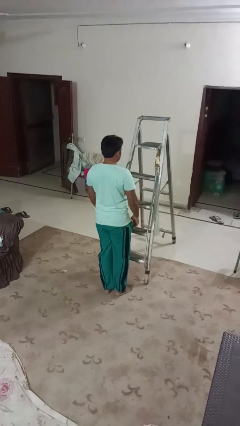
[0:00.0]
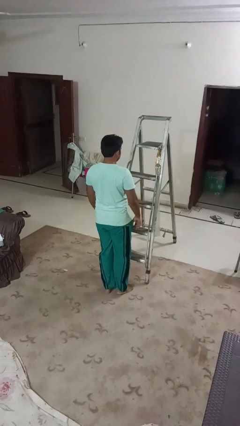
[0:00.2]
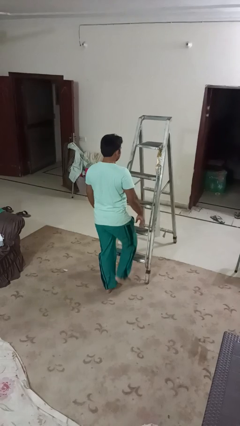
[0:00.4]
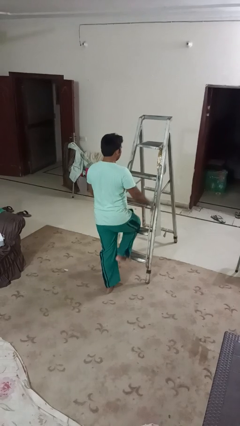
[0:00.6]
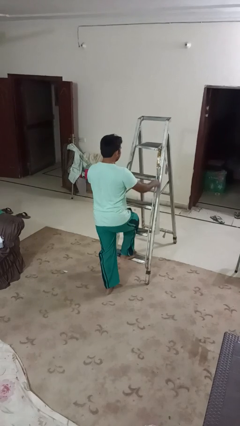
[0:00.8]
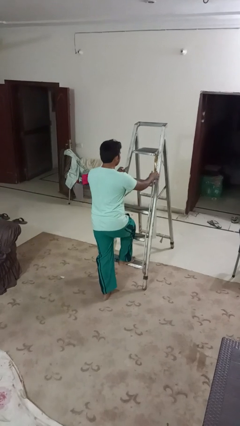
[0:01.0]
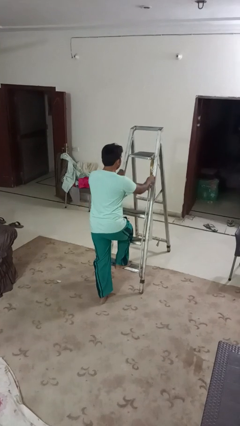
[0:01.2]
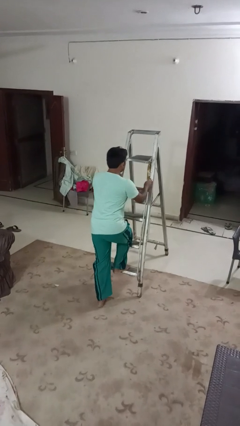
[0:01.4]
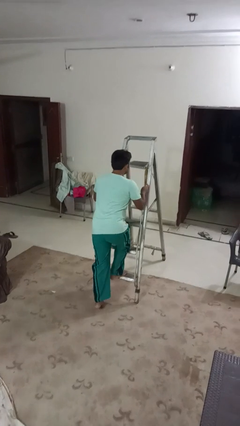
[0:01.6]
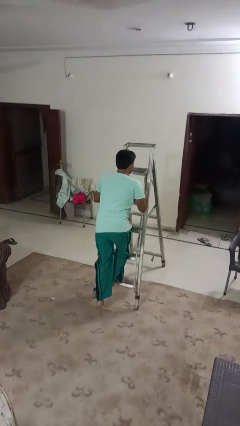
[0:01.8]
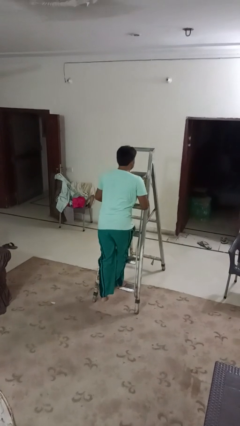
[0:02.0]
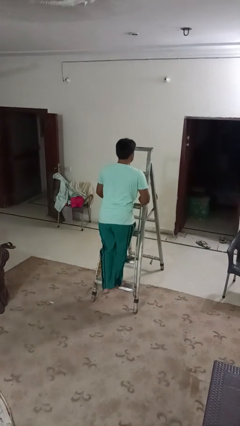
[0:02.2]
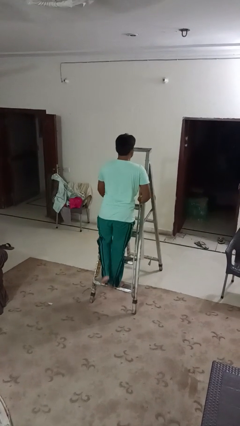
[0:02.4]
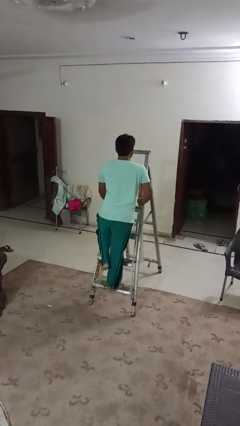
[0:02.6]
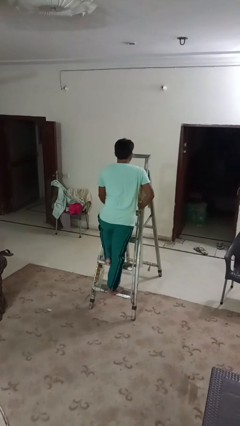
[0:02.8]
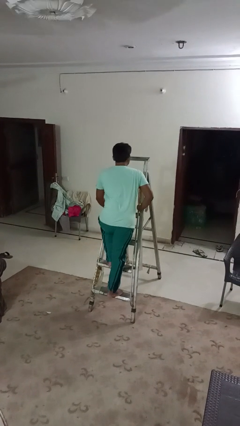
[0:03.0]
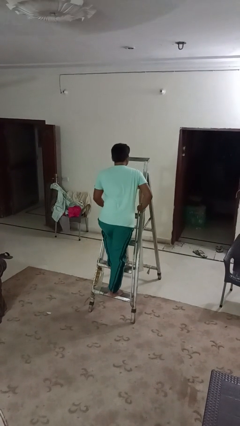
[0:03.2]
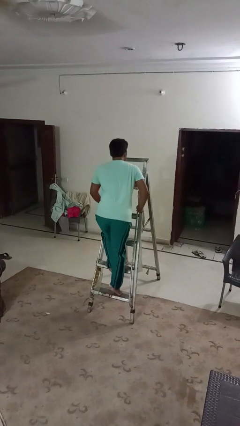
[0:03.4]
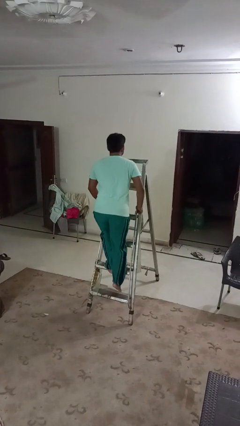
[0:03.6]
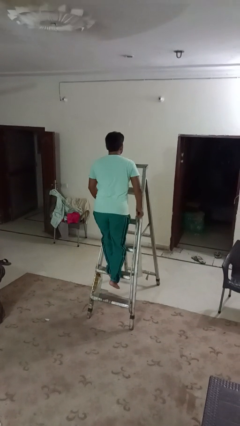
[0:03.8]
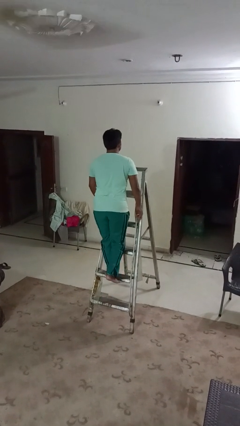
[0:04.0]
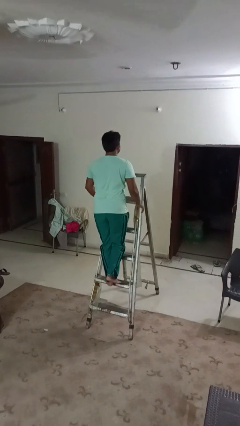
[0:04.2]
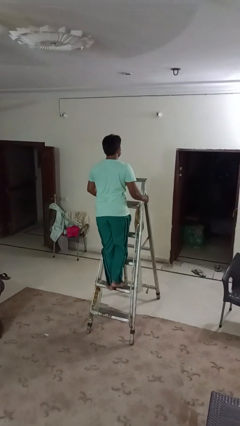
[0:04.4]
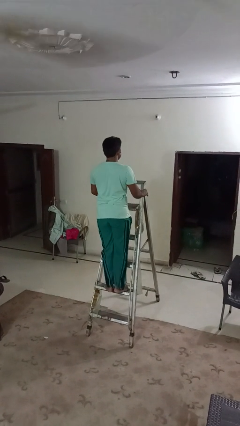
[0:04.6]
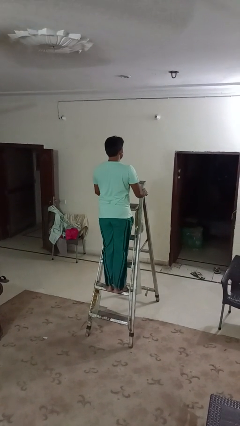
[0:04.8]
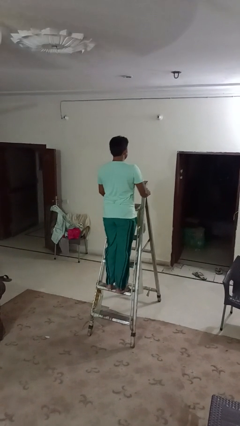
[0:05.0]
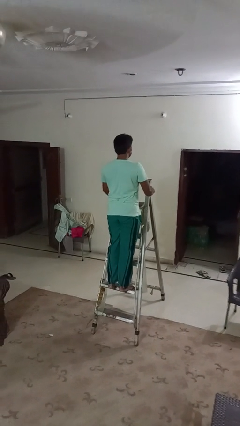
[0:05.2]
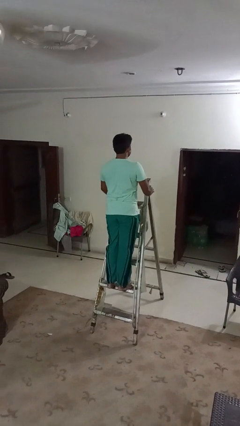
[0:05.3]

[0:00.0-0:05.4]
person climbs up ladder

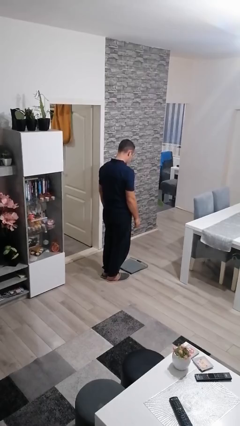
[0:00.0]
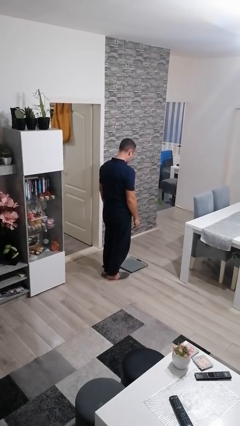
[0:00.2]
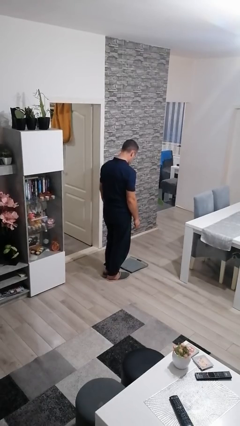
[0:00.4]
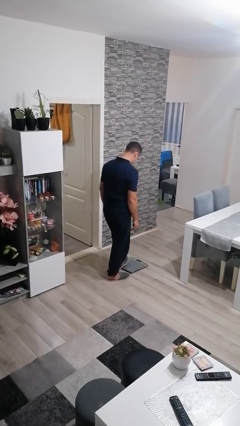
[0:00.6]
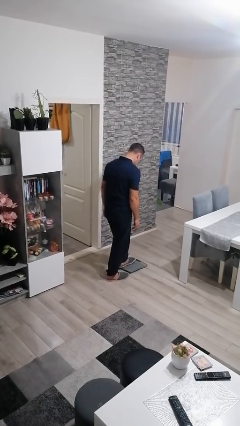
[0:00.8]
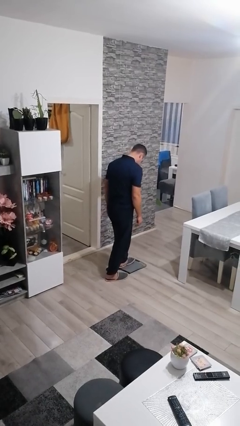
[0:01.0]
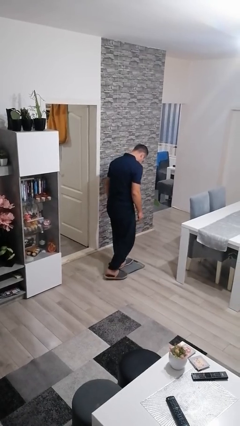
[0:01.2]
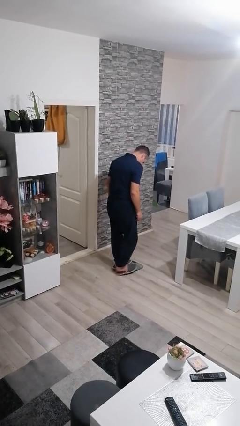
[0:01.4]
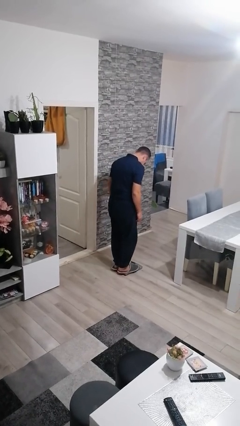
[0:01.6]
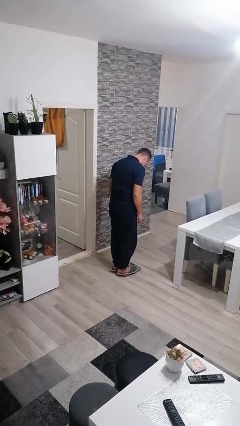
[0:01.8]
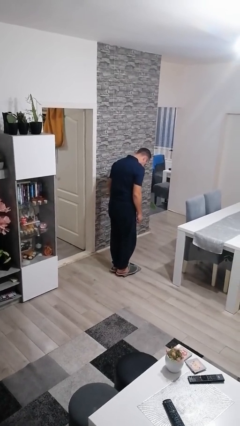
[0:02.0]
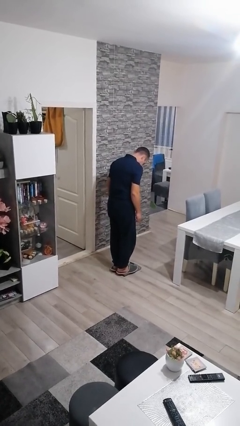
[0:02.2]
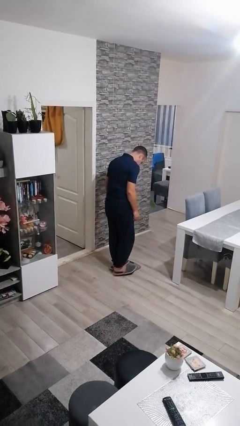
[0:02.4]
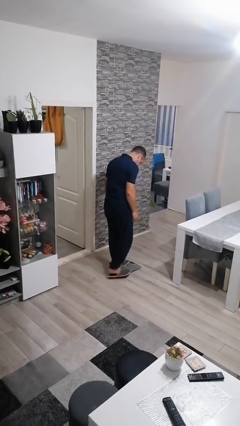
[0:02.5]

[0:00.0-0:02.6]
person uses bodyweight scale

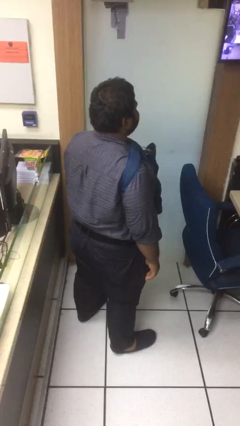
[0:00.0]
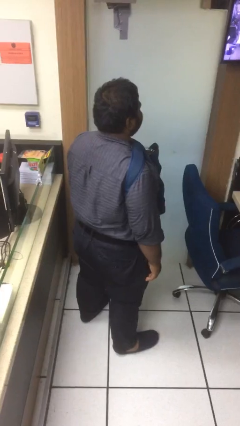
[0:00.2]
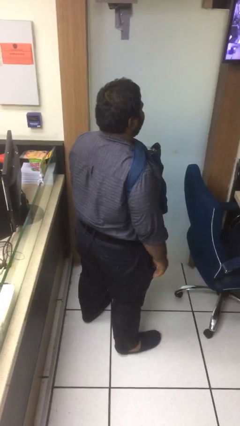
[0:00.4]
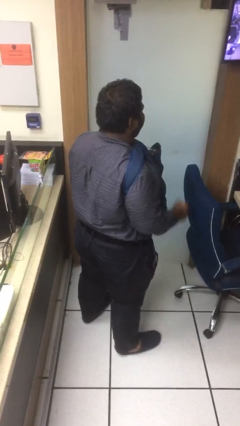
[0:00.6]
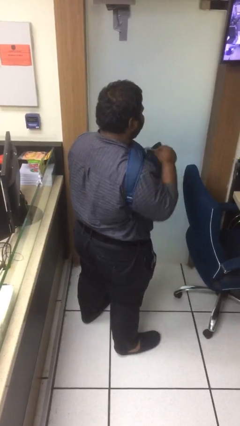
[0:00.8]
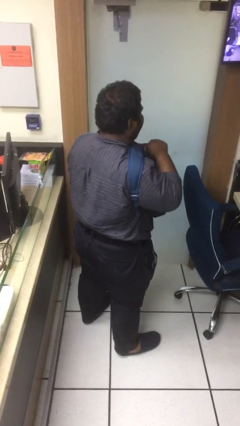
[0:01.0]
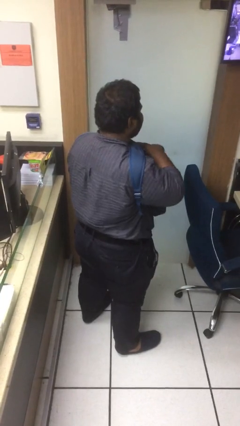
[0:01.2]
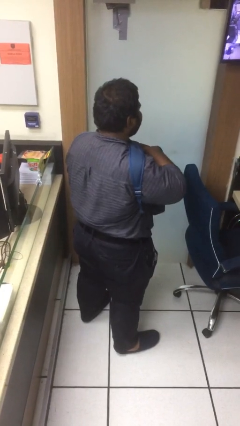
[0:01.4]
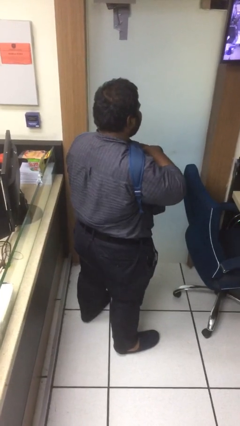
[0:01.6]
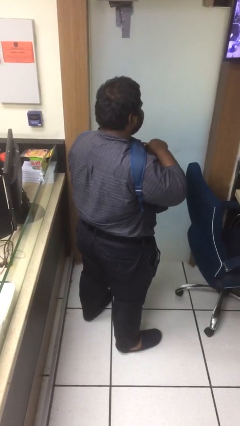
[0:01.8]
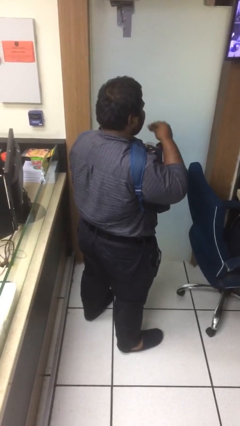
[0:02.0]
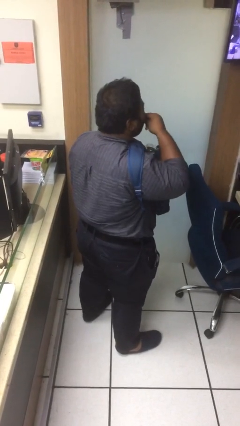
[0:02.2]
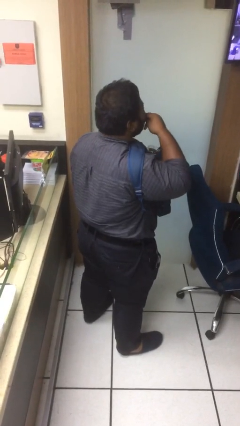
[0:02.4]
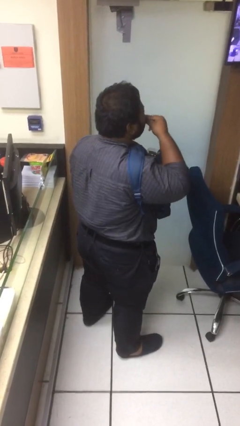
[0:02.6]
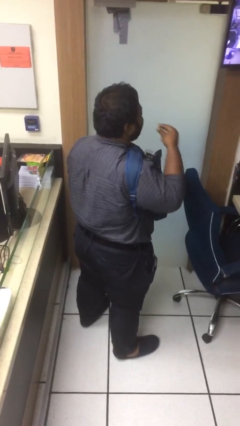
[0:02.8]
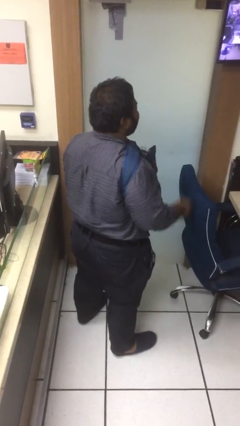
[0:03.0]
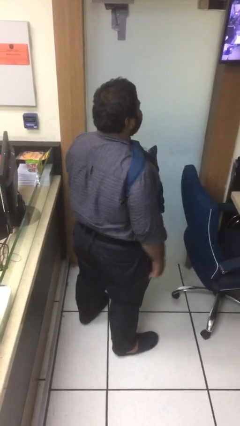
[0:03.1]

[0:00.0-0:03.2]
person eats snack from bag

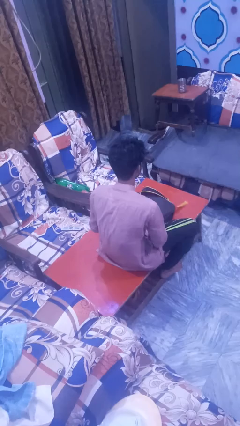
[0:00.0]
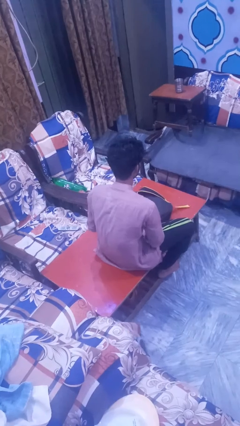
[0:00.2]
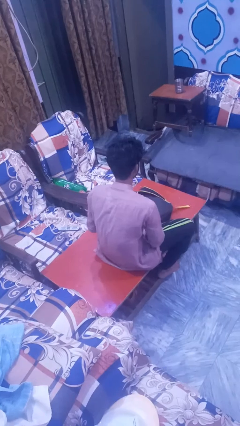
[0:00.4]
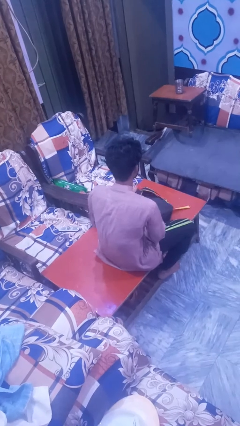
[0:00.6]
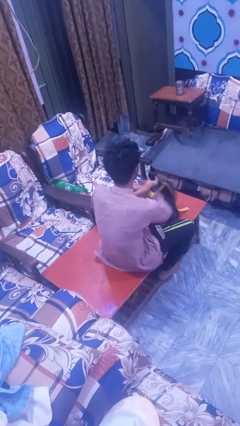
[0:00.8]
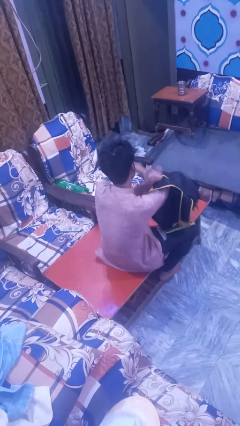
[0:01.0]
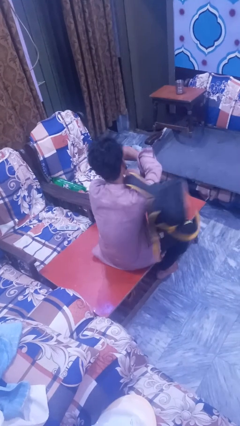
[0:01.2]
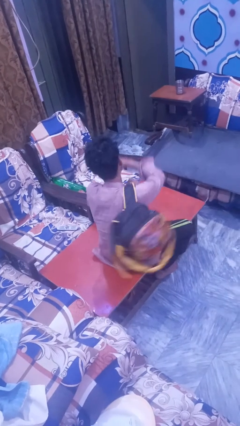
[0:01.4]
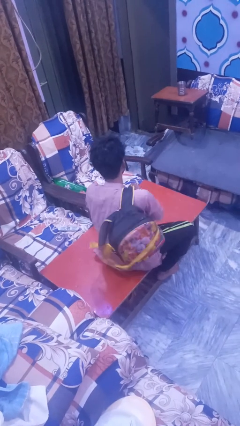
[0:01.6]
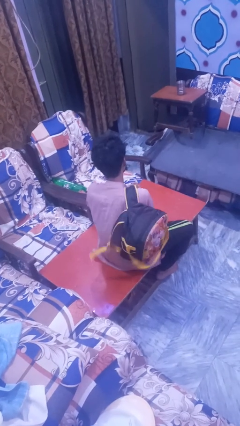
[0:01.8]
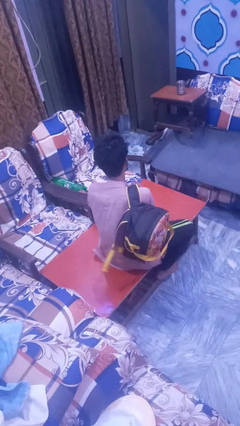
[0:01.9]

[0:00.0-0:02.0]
person puts on backpack

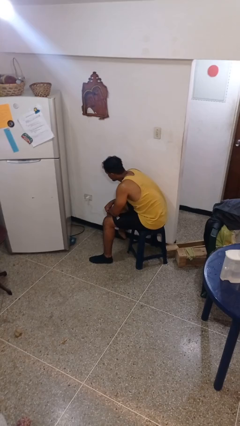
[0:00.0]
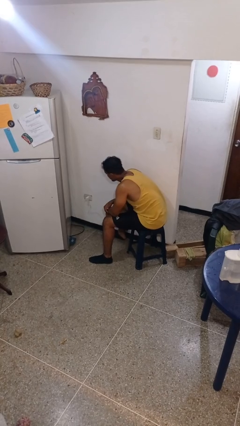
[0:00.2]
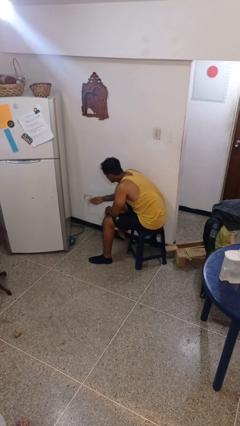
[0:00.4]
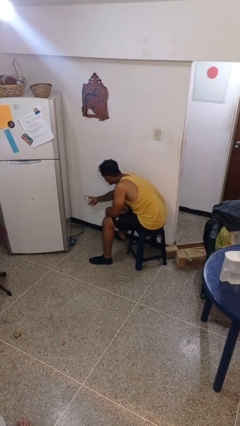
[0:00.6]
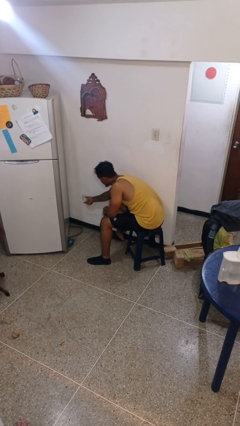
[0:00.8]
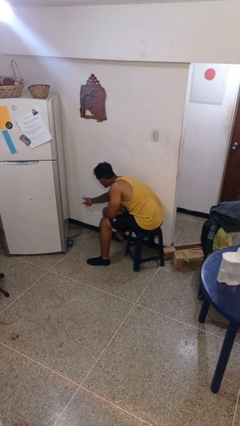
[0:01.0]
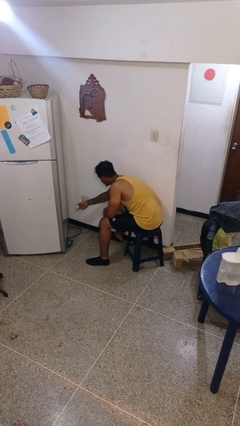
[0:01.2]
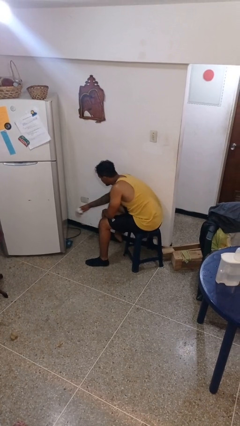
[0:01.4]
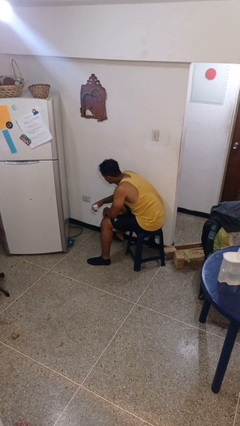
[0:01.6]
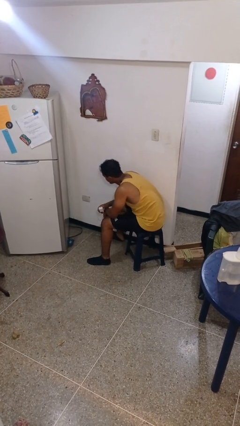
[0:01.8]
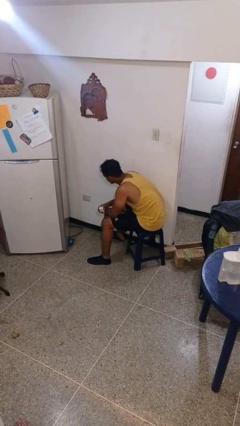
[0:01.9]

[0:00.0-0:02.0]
person unplugs from electrical socket

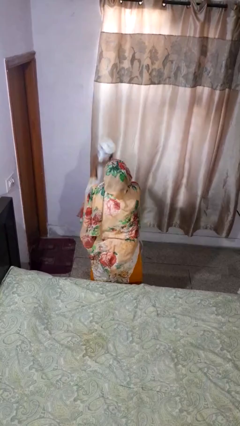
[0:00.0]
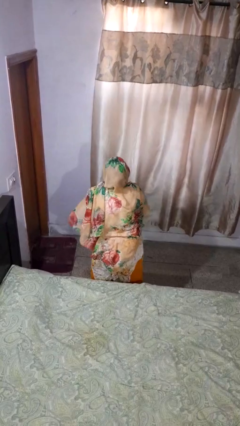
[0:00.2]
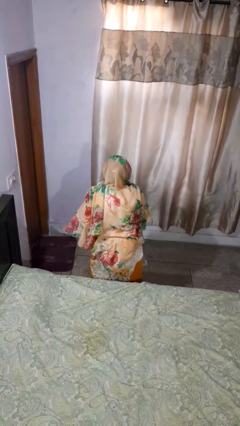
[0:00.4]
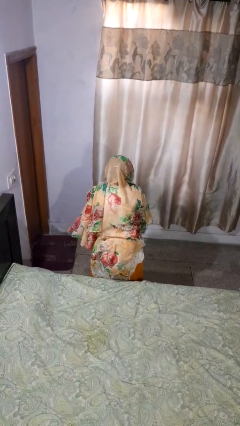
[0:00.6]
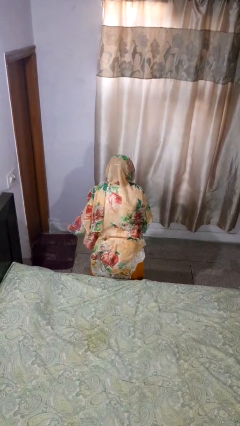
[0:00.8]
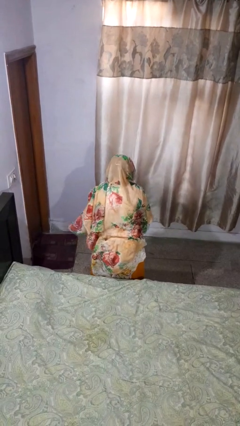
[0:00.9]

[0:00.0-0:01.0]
person catches dropped object

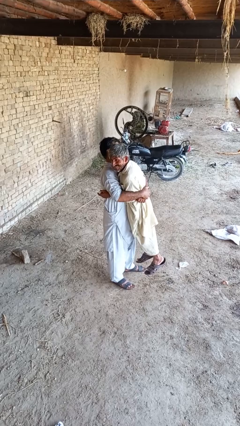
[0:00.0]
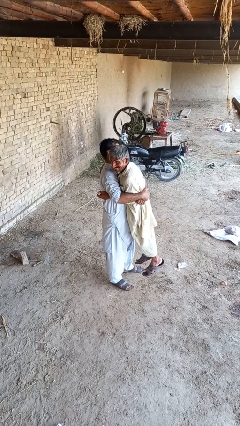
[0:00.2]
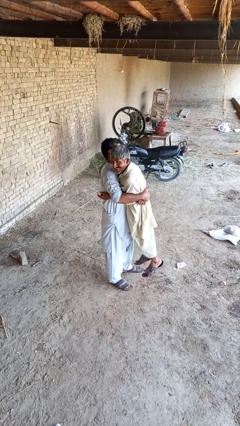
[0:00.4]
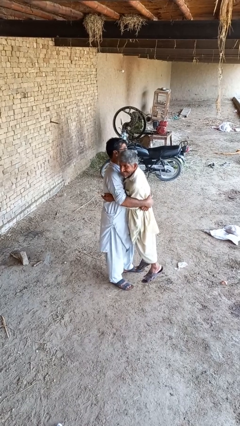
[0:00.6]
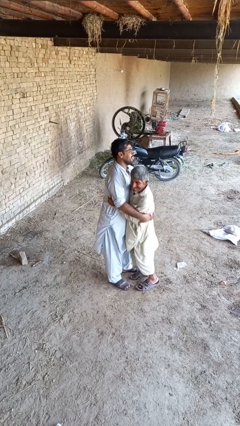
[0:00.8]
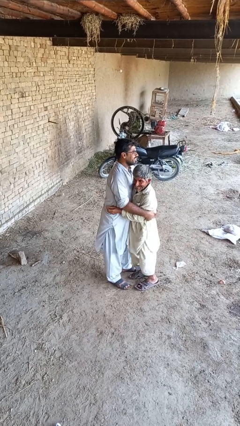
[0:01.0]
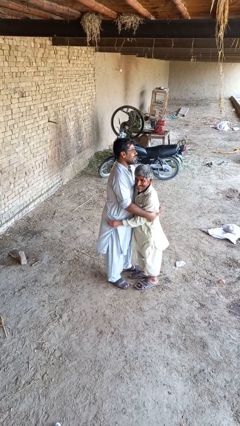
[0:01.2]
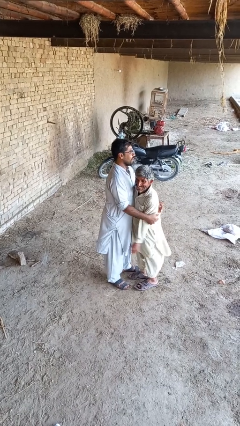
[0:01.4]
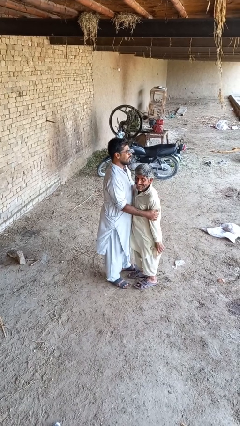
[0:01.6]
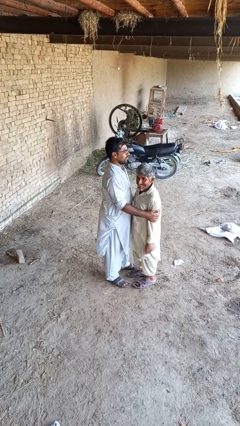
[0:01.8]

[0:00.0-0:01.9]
person puts down person
